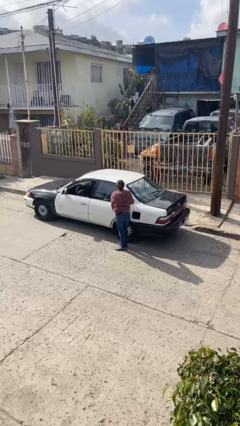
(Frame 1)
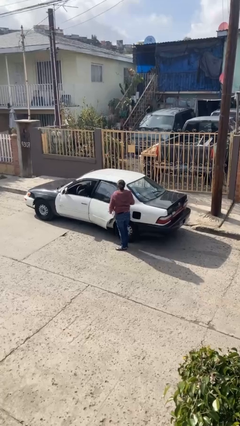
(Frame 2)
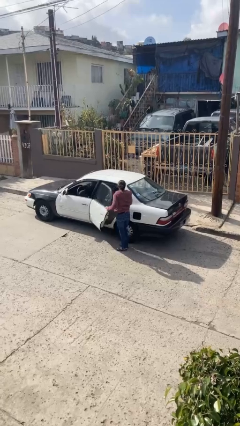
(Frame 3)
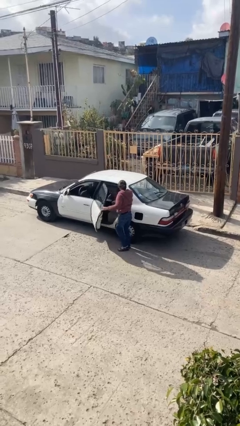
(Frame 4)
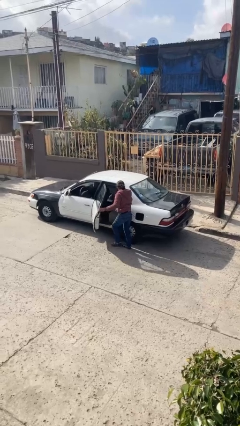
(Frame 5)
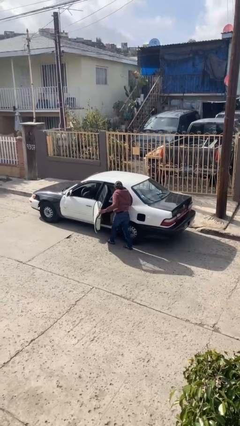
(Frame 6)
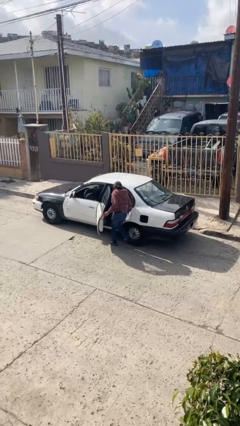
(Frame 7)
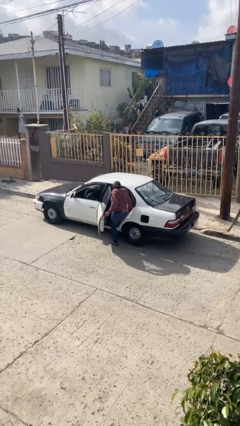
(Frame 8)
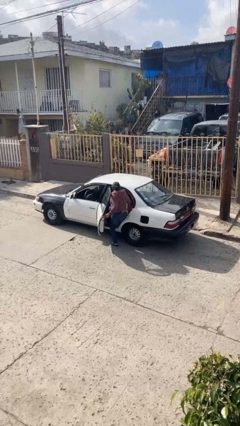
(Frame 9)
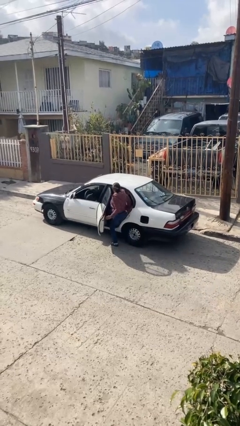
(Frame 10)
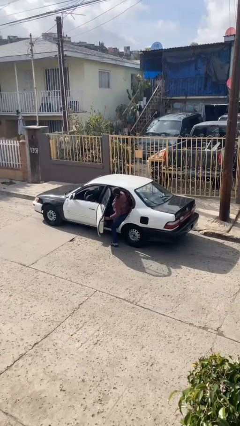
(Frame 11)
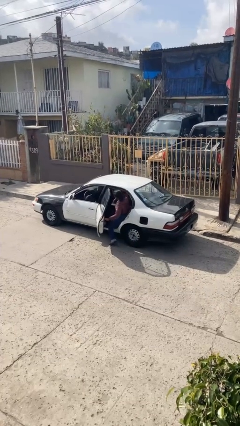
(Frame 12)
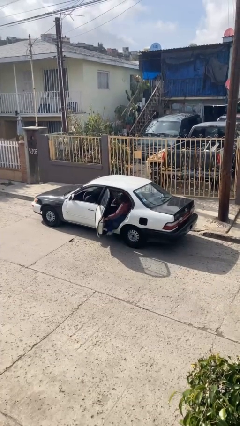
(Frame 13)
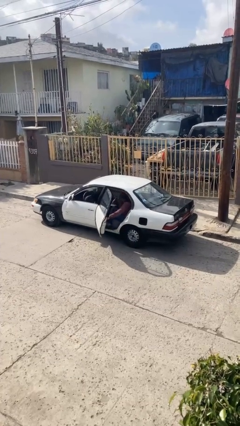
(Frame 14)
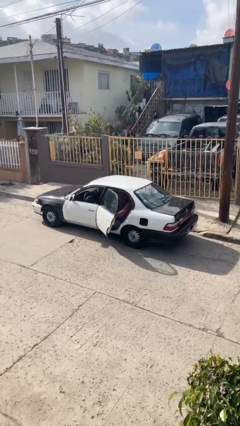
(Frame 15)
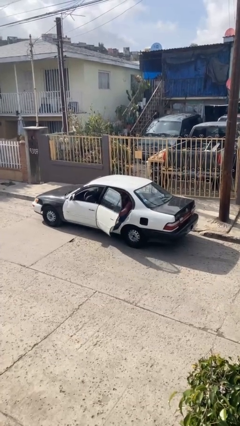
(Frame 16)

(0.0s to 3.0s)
person enters car

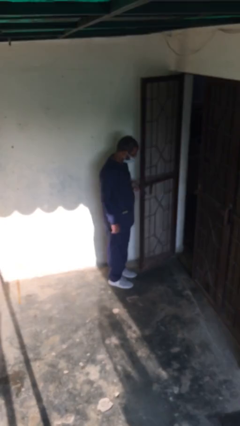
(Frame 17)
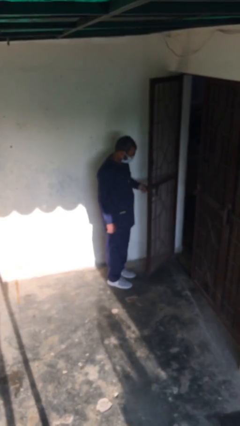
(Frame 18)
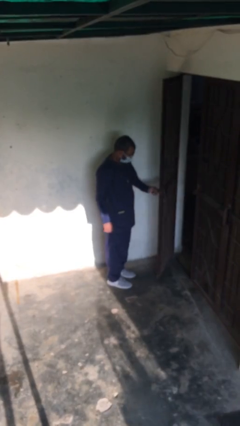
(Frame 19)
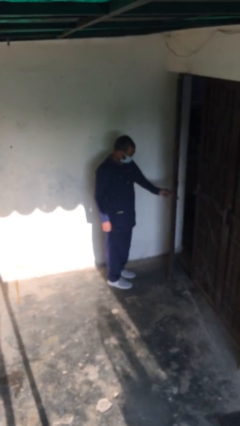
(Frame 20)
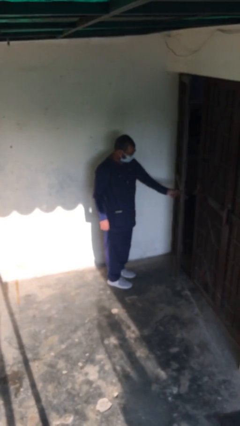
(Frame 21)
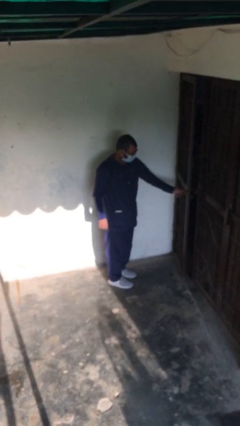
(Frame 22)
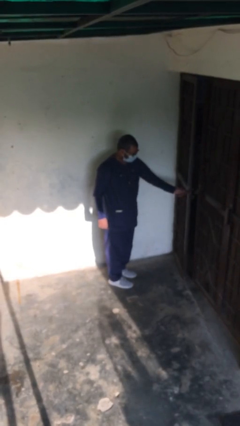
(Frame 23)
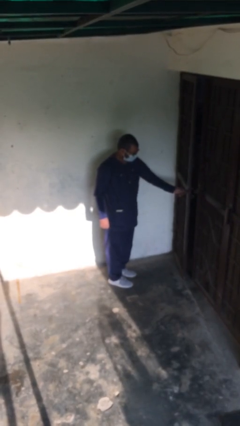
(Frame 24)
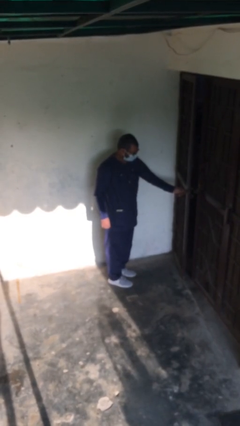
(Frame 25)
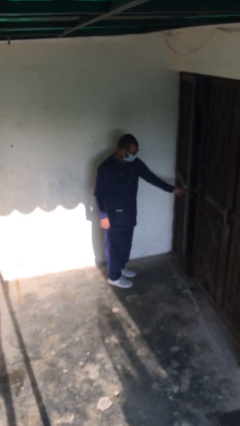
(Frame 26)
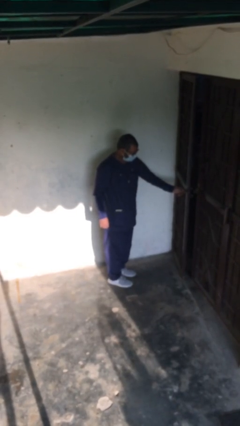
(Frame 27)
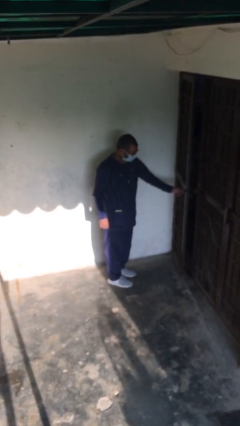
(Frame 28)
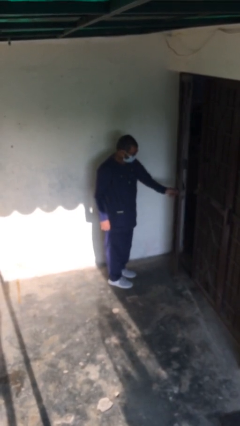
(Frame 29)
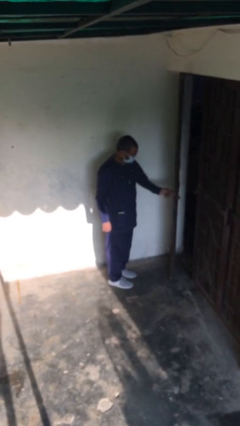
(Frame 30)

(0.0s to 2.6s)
person closes facility door

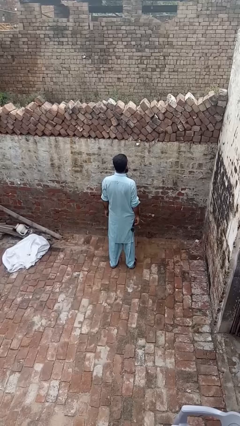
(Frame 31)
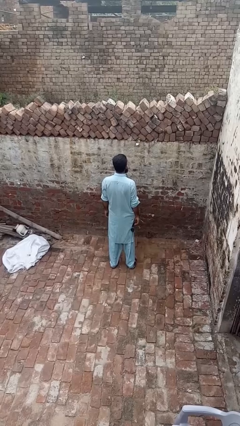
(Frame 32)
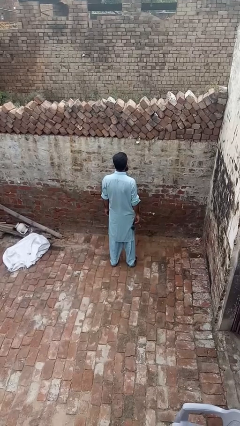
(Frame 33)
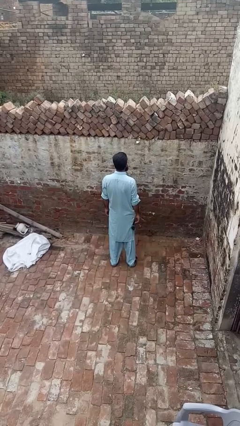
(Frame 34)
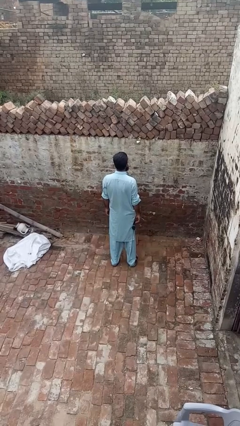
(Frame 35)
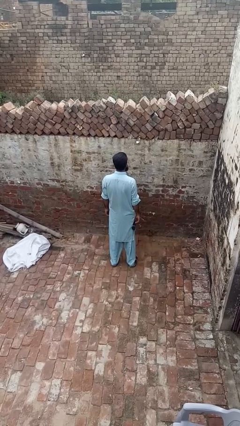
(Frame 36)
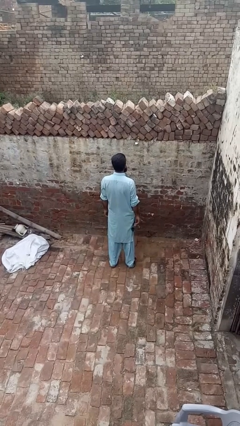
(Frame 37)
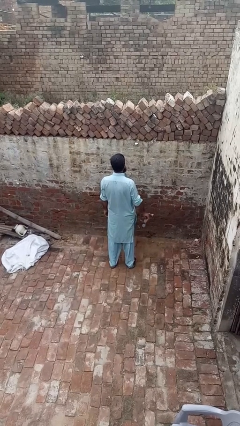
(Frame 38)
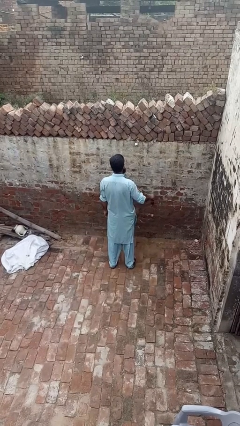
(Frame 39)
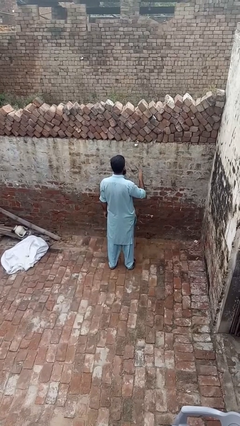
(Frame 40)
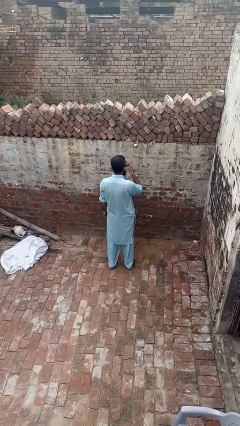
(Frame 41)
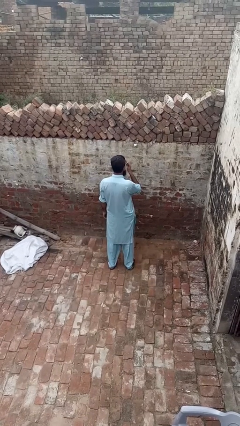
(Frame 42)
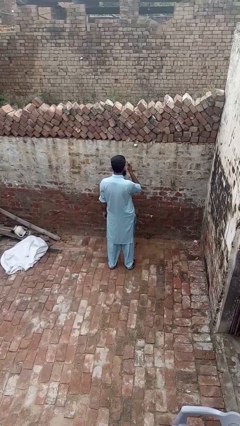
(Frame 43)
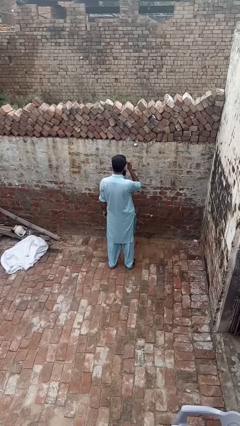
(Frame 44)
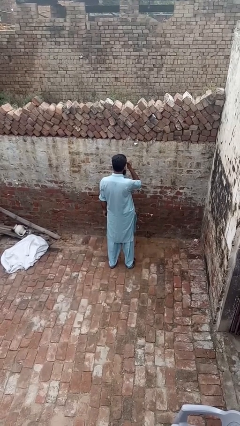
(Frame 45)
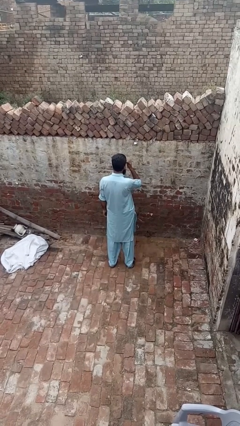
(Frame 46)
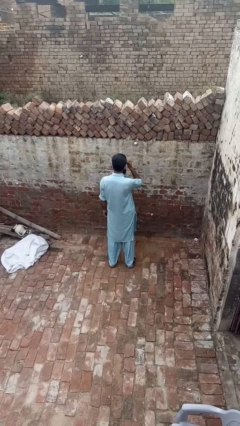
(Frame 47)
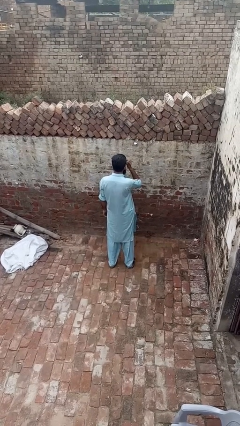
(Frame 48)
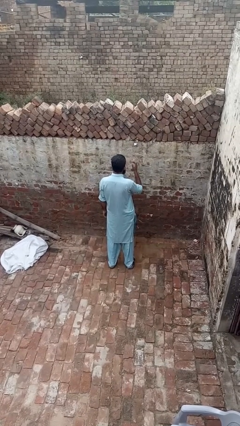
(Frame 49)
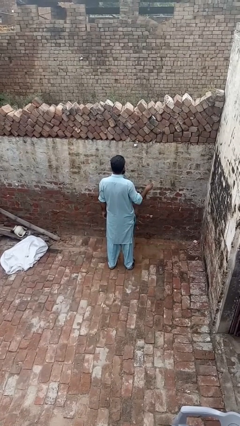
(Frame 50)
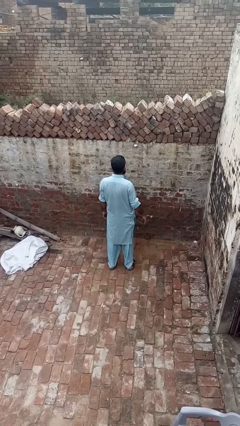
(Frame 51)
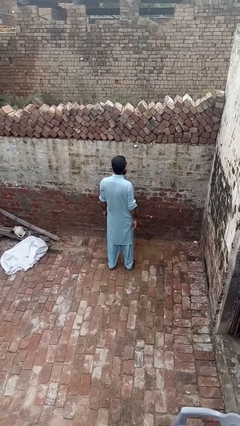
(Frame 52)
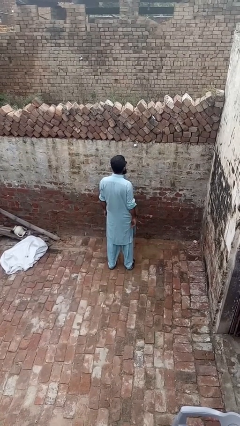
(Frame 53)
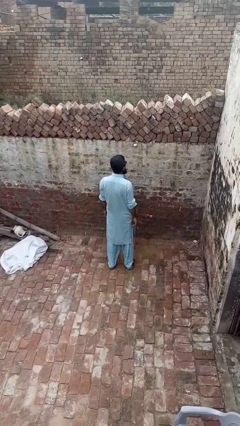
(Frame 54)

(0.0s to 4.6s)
person puts on sunglasses

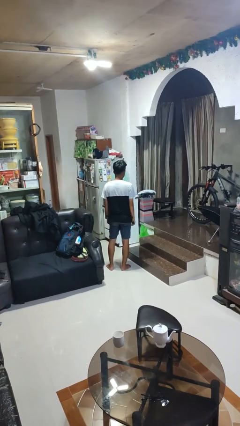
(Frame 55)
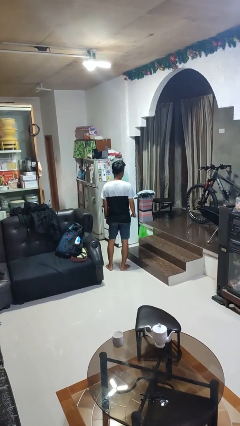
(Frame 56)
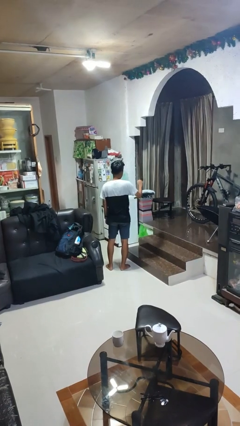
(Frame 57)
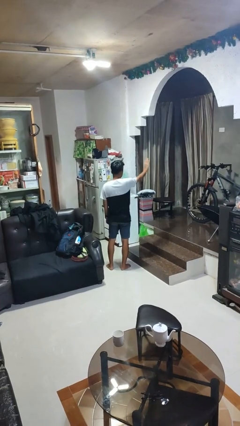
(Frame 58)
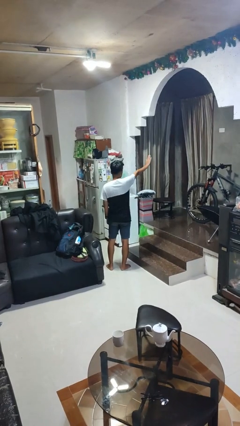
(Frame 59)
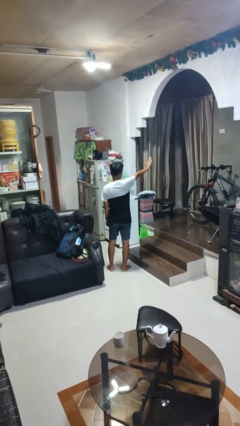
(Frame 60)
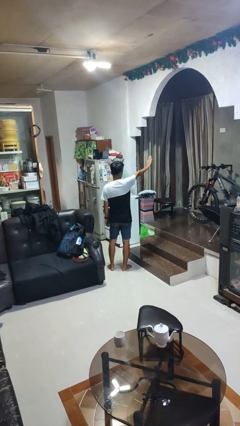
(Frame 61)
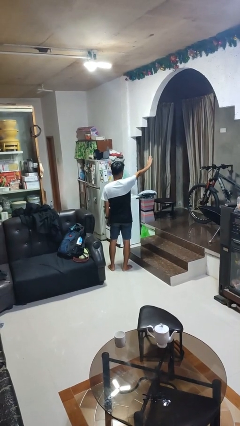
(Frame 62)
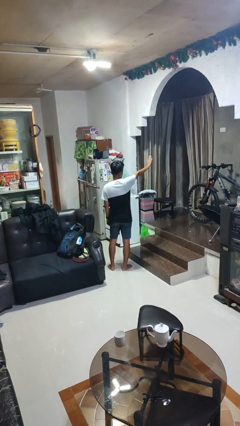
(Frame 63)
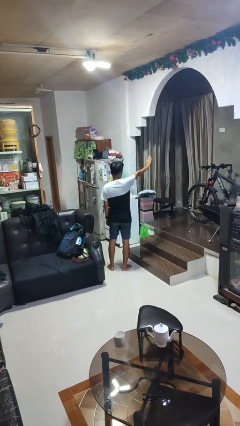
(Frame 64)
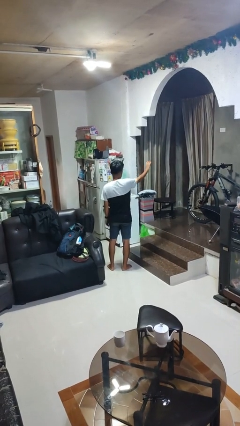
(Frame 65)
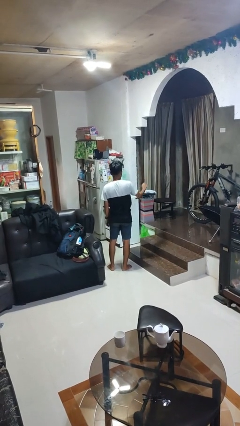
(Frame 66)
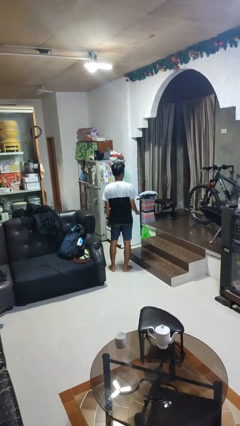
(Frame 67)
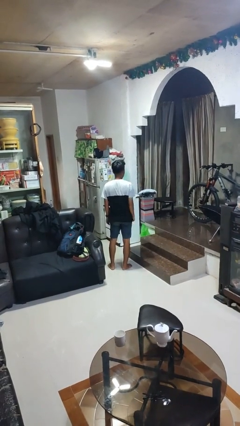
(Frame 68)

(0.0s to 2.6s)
person gestures stop

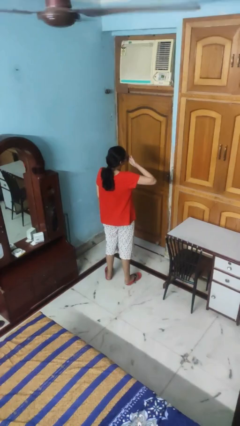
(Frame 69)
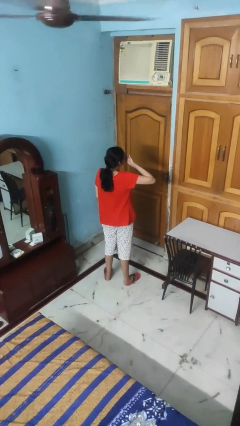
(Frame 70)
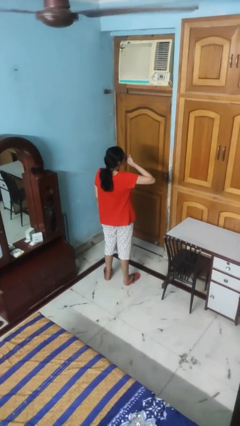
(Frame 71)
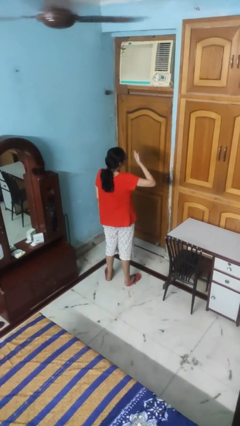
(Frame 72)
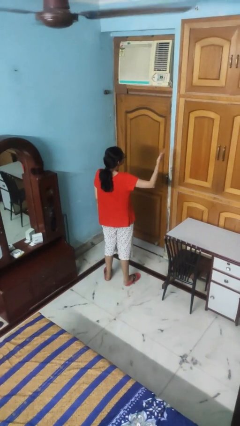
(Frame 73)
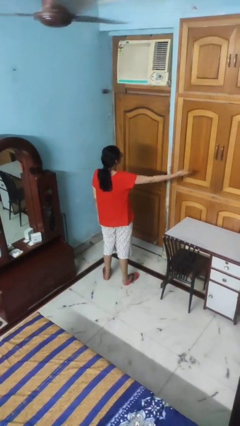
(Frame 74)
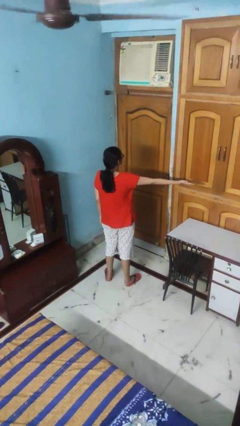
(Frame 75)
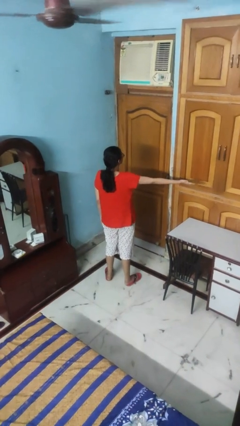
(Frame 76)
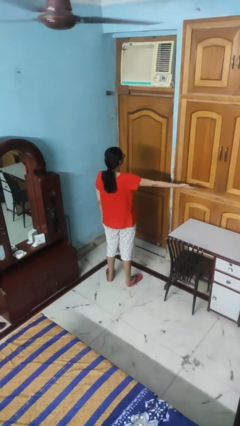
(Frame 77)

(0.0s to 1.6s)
person gestures blow kiss

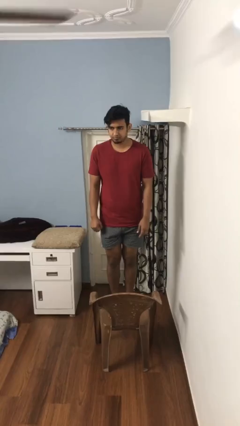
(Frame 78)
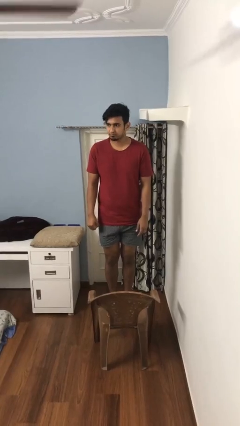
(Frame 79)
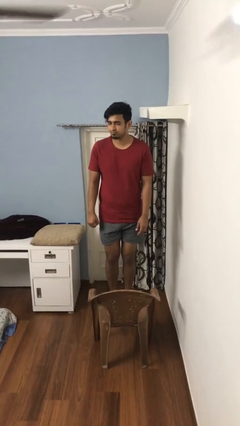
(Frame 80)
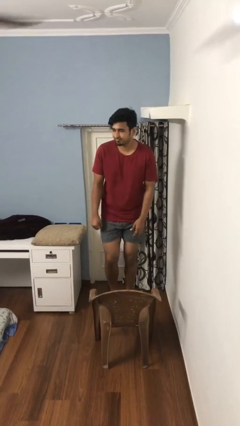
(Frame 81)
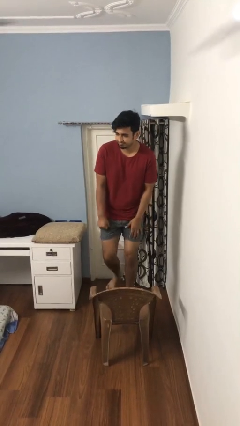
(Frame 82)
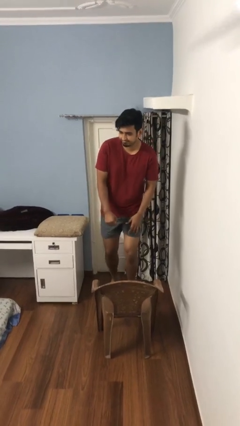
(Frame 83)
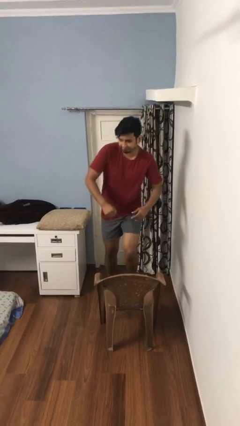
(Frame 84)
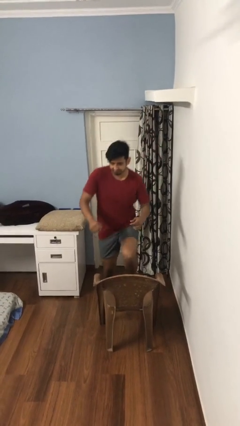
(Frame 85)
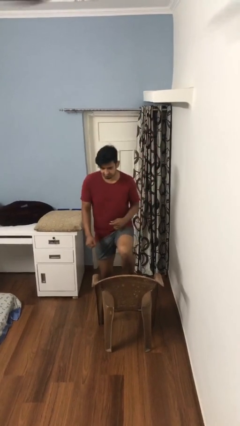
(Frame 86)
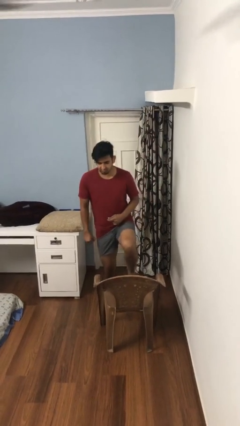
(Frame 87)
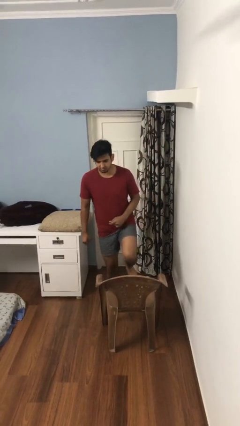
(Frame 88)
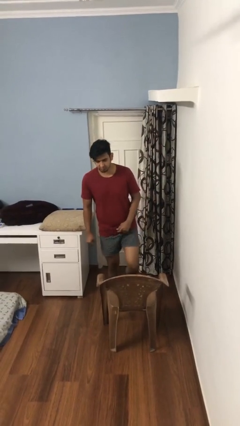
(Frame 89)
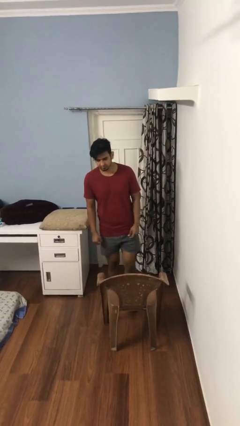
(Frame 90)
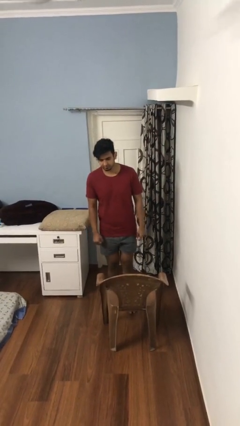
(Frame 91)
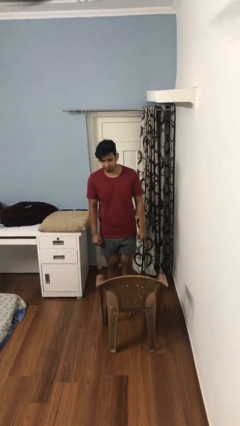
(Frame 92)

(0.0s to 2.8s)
person climbs off chair

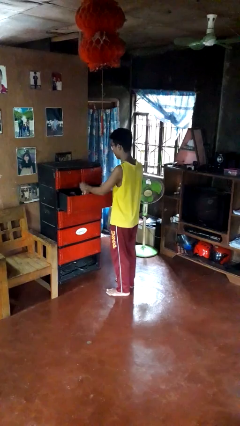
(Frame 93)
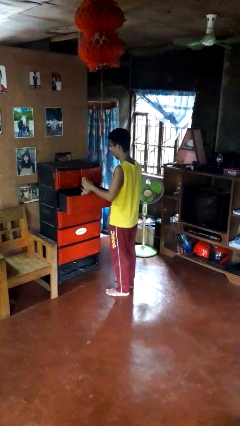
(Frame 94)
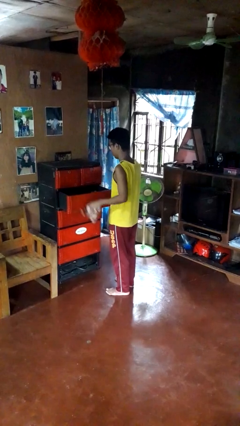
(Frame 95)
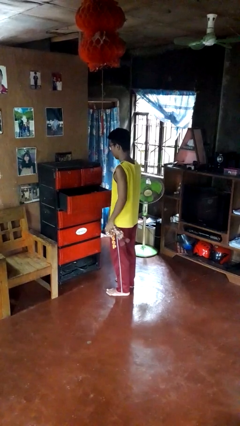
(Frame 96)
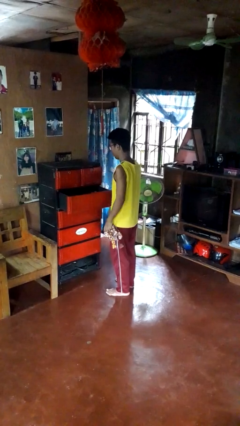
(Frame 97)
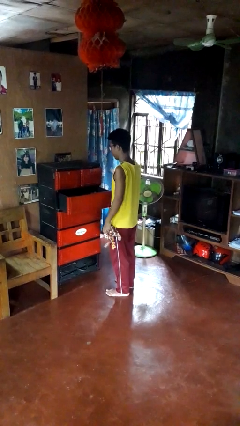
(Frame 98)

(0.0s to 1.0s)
person takes clothes from dresser
